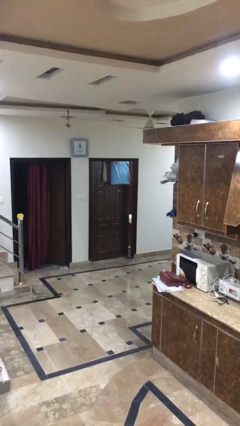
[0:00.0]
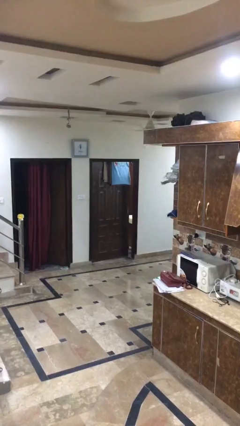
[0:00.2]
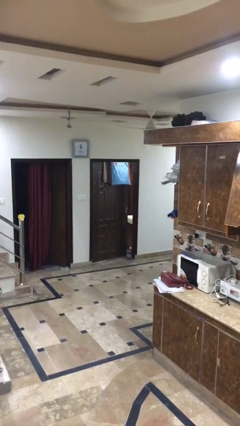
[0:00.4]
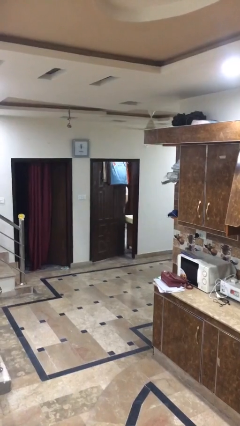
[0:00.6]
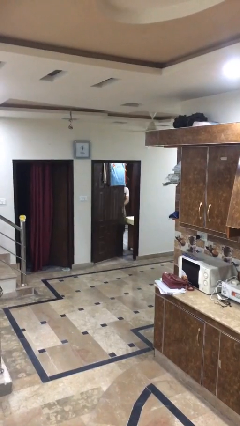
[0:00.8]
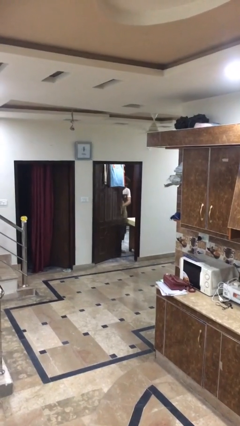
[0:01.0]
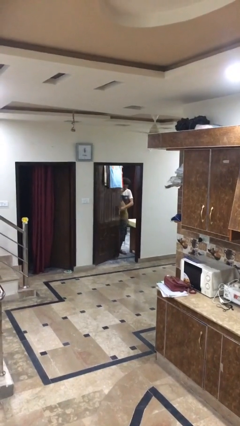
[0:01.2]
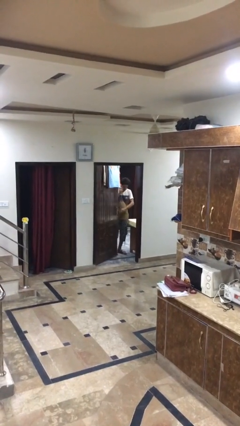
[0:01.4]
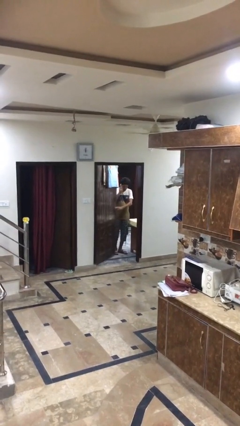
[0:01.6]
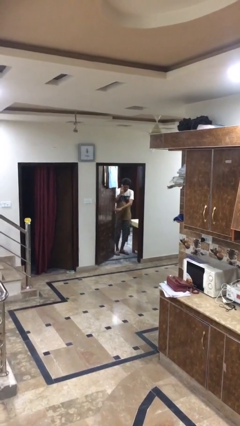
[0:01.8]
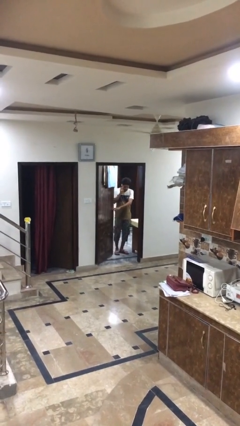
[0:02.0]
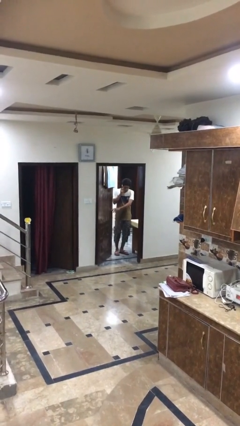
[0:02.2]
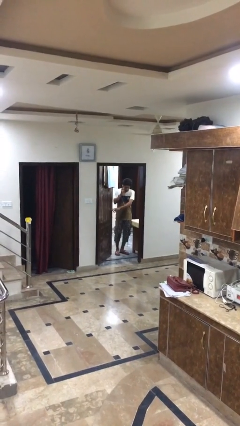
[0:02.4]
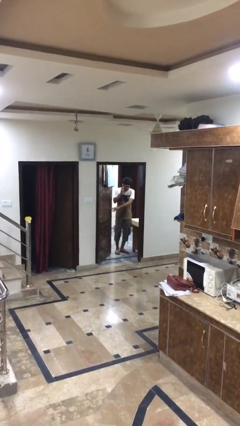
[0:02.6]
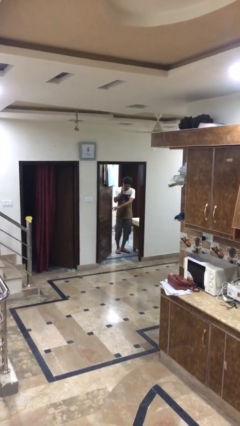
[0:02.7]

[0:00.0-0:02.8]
person opens facility door

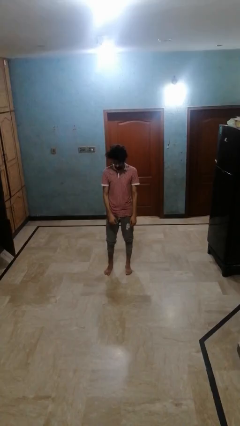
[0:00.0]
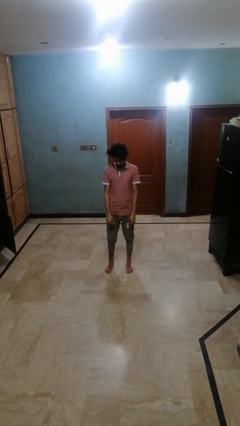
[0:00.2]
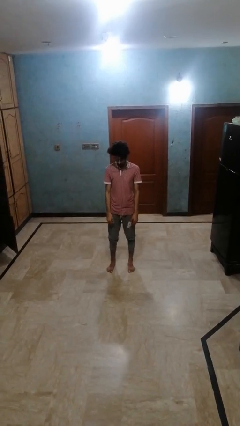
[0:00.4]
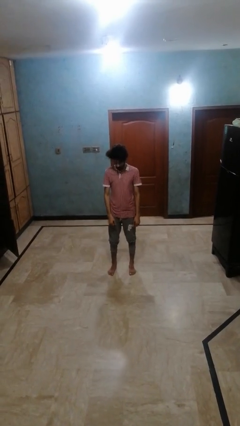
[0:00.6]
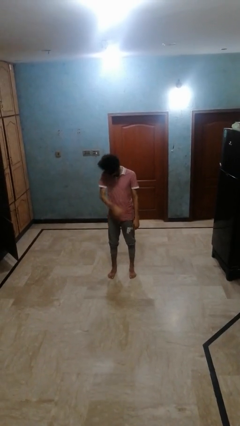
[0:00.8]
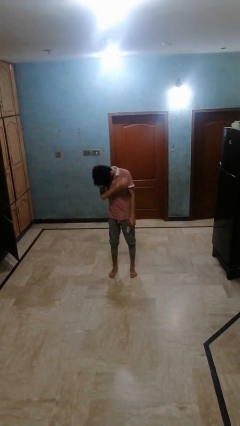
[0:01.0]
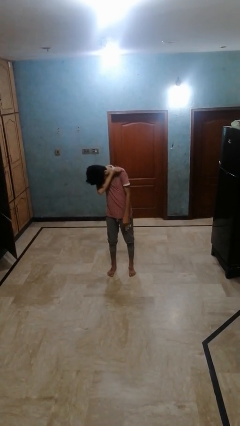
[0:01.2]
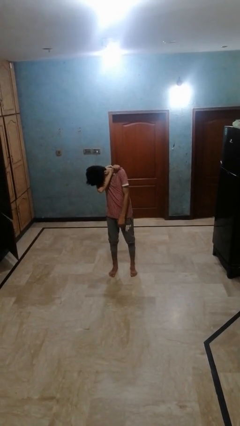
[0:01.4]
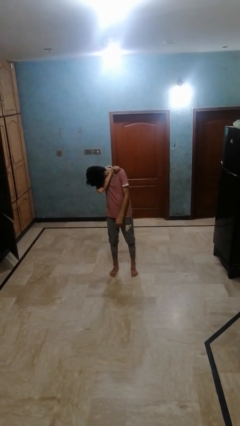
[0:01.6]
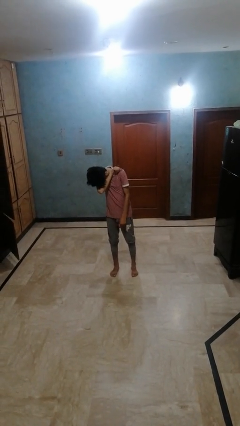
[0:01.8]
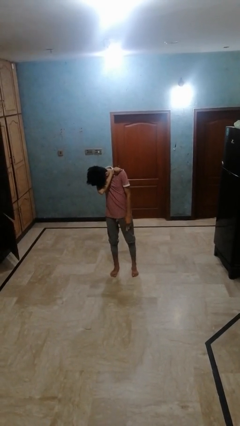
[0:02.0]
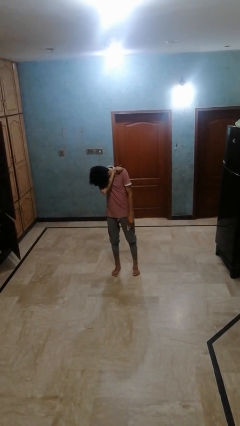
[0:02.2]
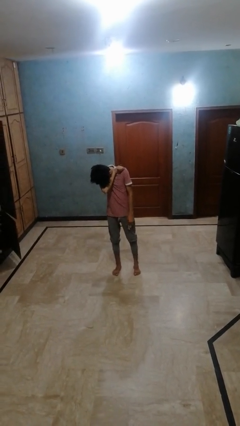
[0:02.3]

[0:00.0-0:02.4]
person sneezes into arm

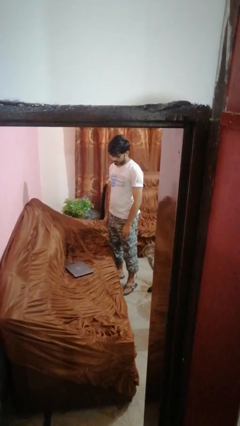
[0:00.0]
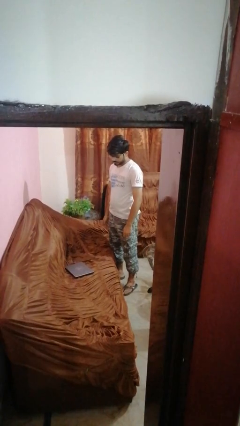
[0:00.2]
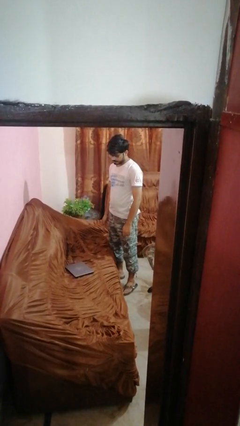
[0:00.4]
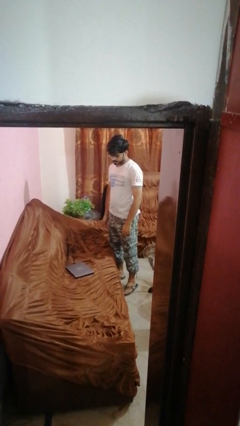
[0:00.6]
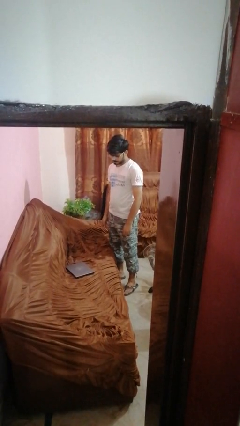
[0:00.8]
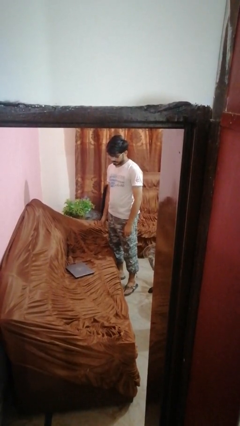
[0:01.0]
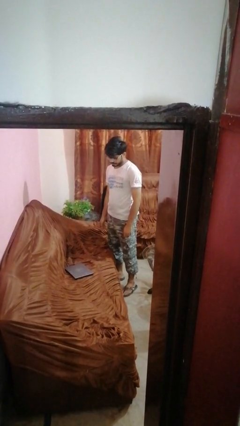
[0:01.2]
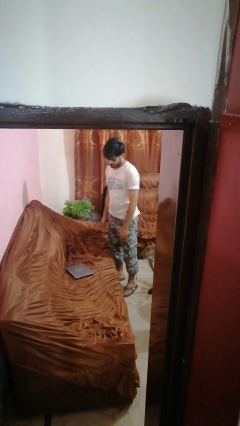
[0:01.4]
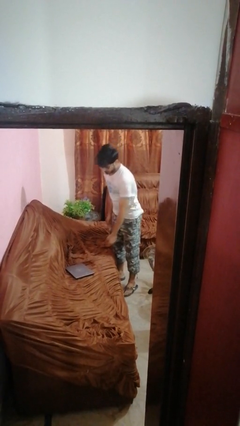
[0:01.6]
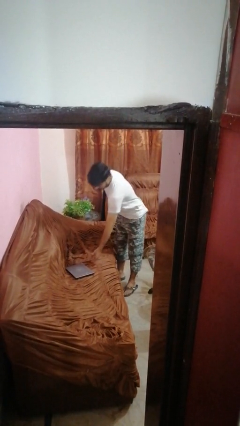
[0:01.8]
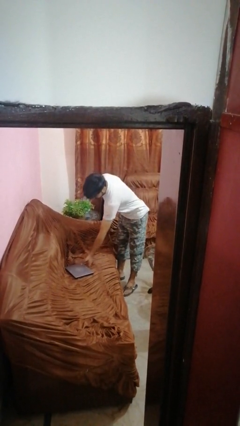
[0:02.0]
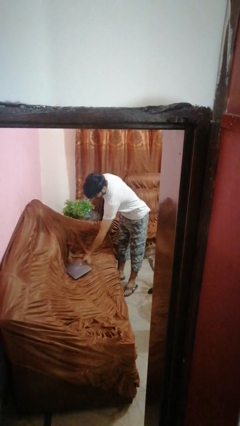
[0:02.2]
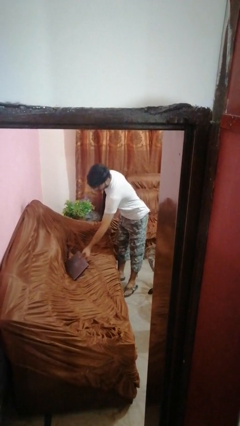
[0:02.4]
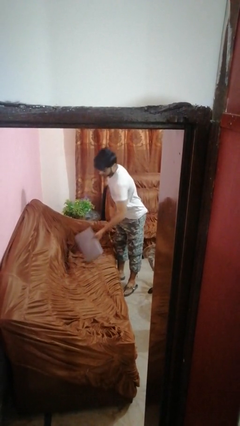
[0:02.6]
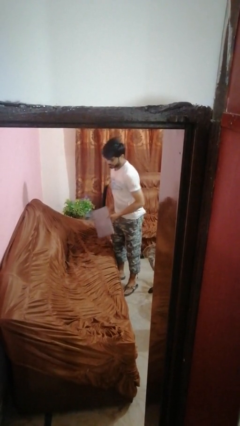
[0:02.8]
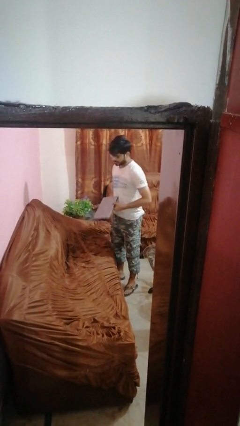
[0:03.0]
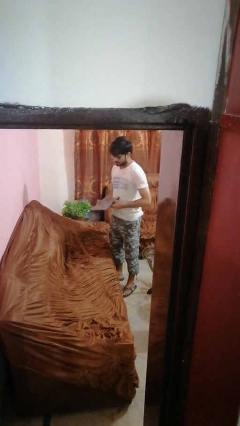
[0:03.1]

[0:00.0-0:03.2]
person picks up object from couch

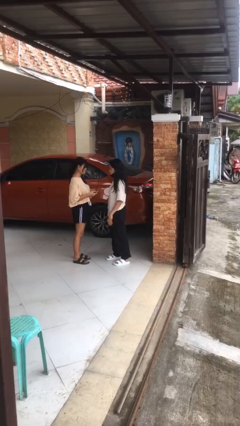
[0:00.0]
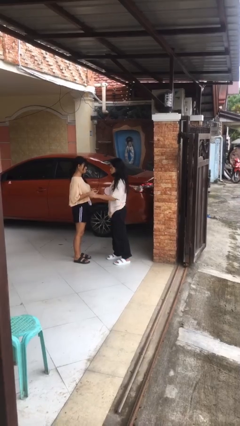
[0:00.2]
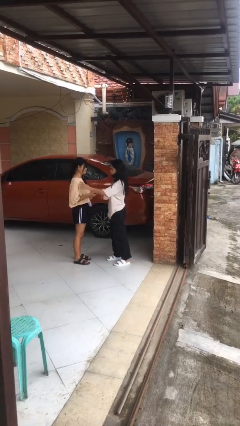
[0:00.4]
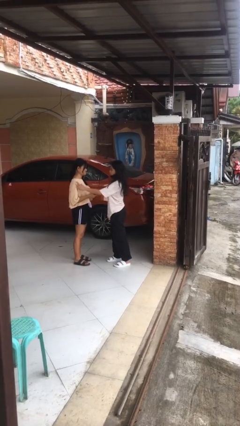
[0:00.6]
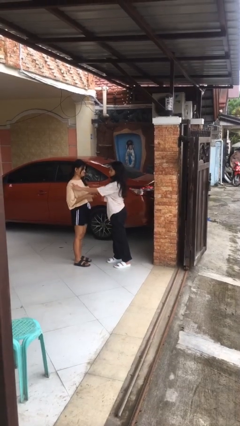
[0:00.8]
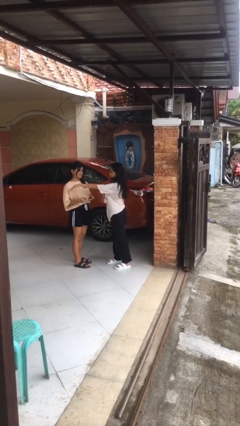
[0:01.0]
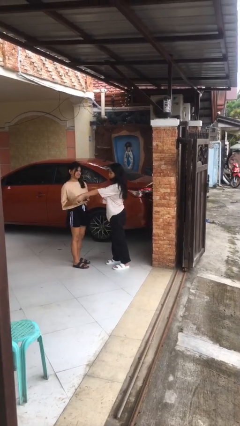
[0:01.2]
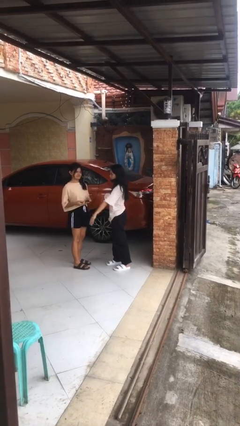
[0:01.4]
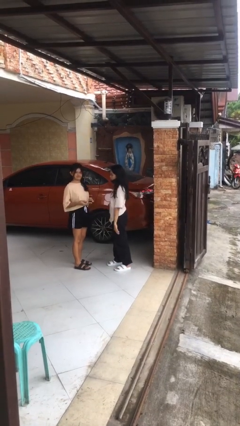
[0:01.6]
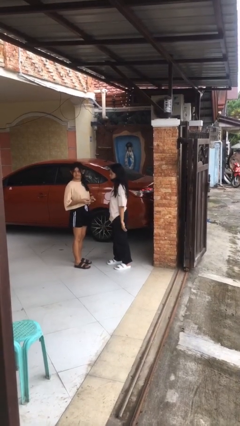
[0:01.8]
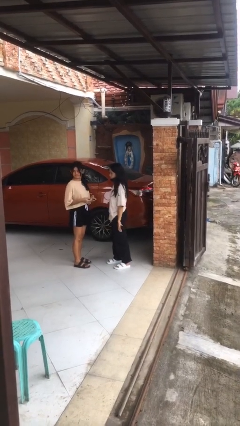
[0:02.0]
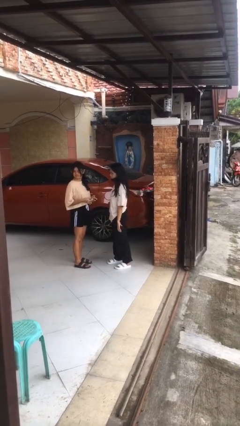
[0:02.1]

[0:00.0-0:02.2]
person shoves person

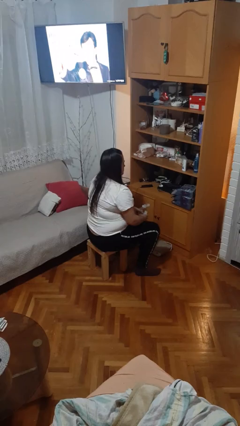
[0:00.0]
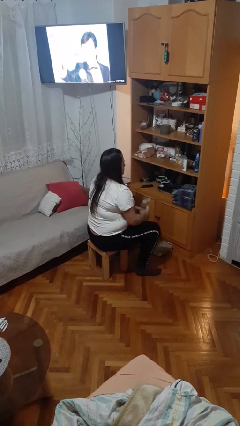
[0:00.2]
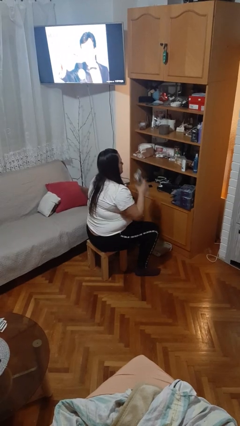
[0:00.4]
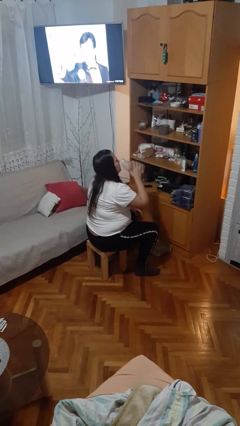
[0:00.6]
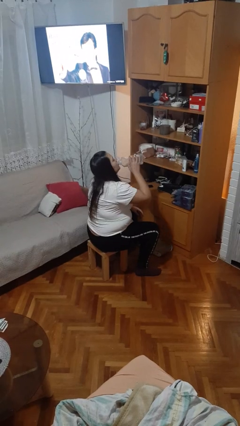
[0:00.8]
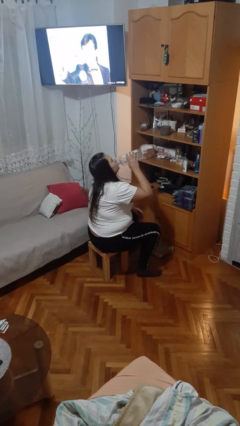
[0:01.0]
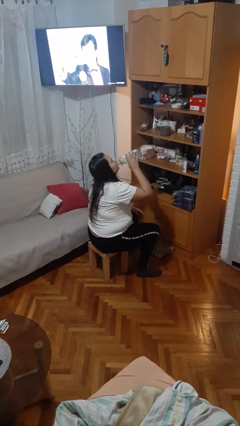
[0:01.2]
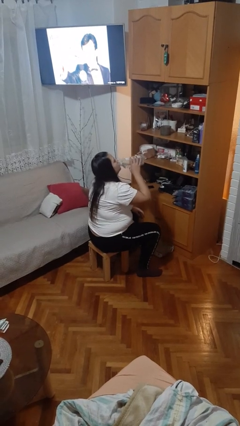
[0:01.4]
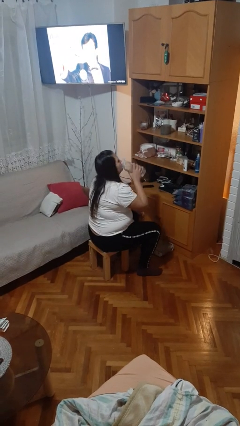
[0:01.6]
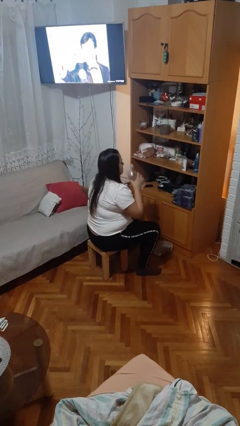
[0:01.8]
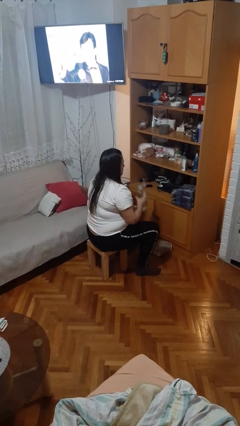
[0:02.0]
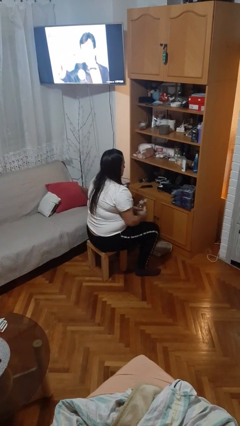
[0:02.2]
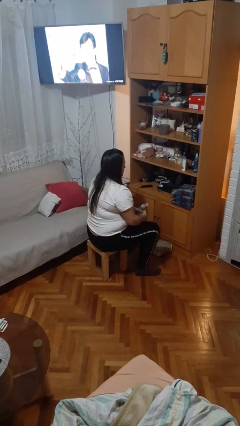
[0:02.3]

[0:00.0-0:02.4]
person drinks from bottle

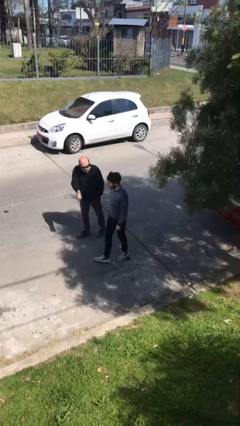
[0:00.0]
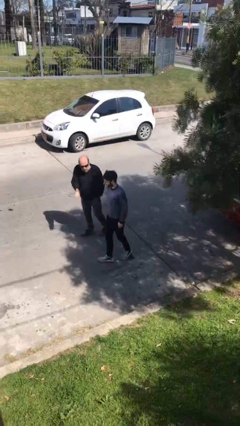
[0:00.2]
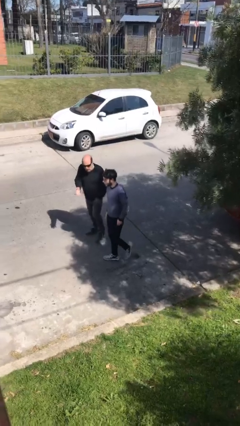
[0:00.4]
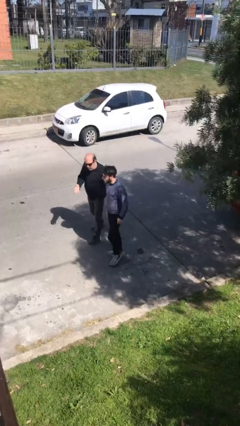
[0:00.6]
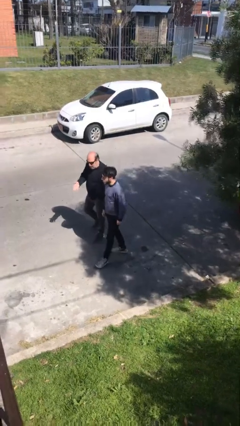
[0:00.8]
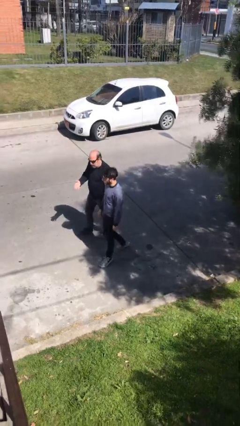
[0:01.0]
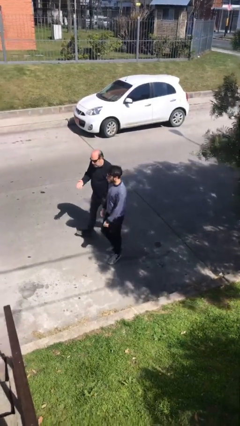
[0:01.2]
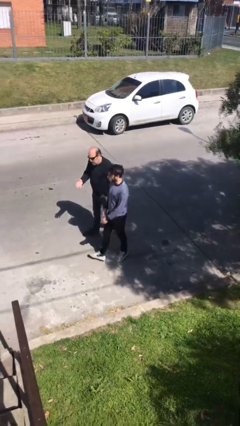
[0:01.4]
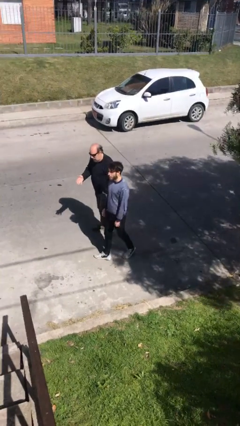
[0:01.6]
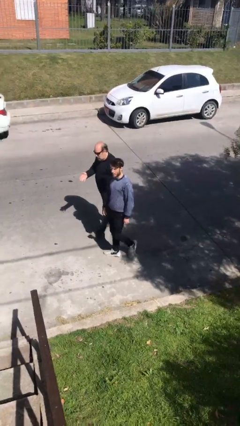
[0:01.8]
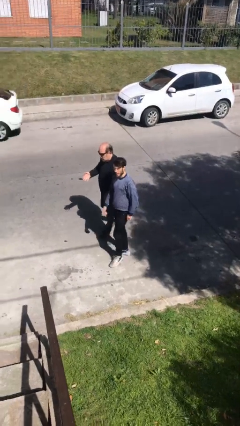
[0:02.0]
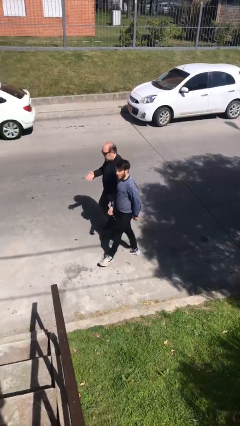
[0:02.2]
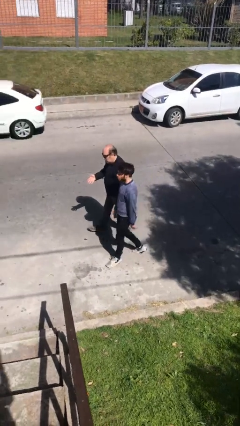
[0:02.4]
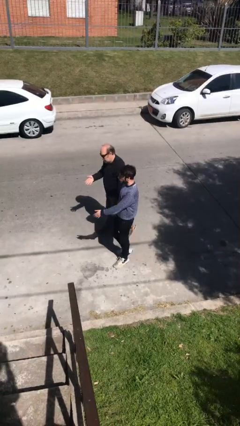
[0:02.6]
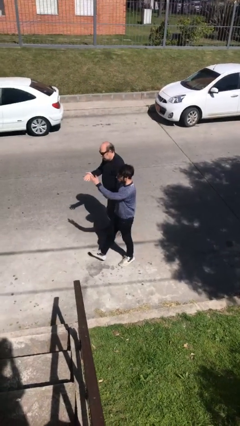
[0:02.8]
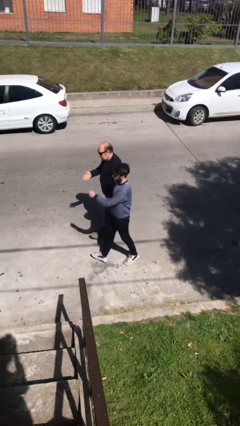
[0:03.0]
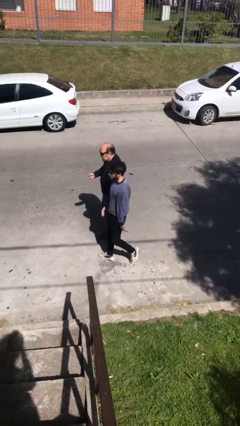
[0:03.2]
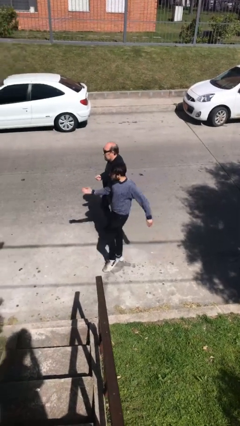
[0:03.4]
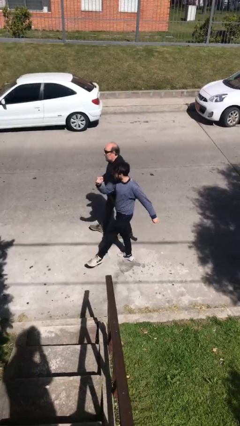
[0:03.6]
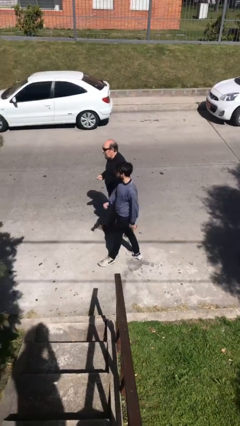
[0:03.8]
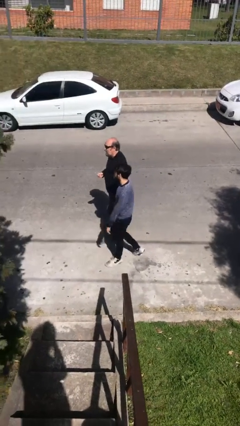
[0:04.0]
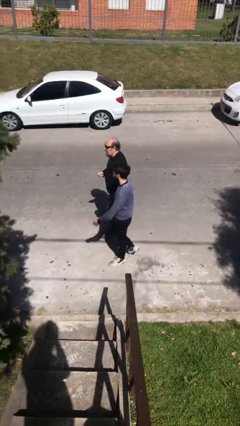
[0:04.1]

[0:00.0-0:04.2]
person talks to person
